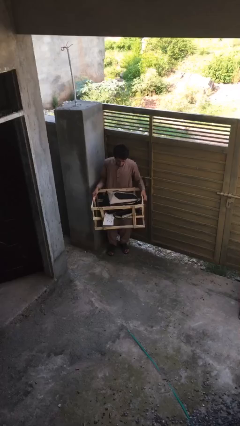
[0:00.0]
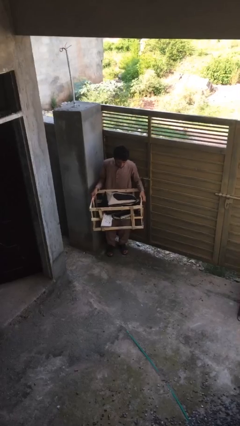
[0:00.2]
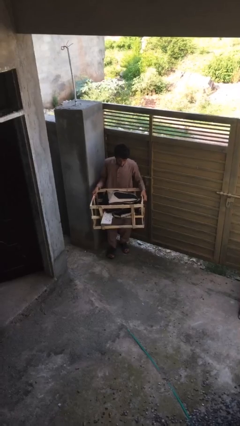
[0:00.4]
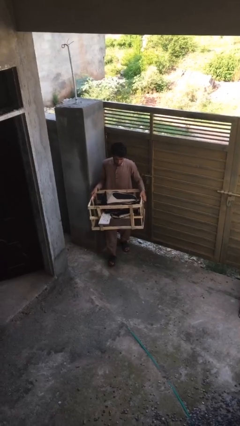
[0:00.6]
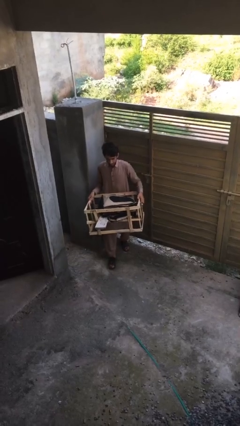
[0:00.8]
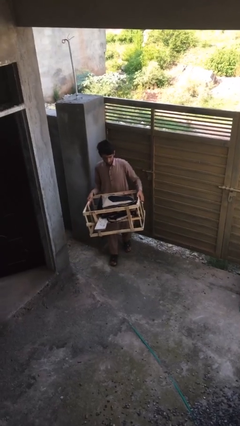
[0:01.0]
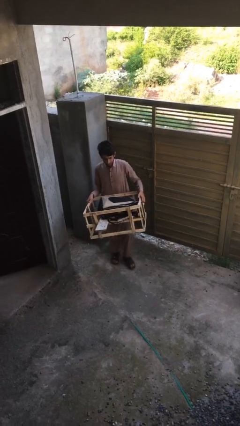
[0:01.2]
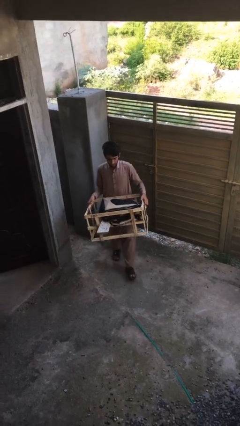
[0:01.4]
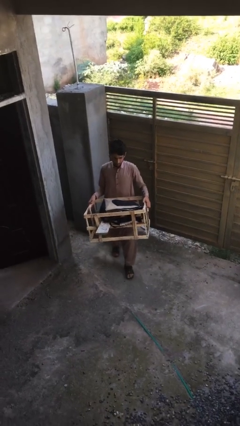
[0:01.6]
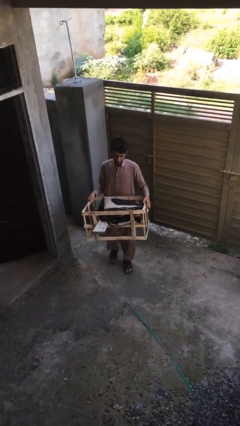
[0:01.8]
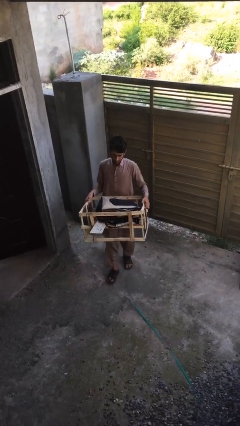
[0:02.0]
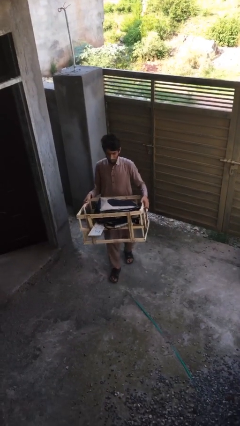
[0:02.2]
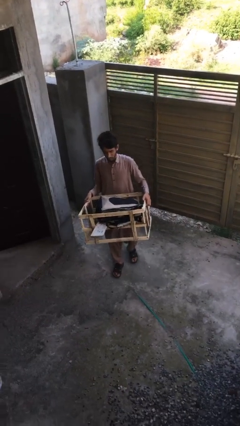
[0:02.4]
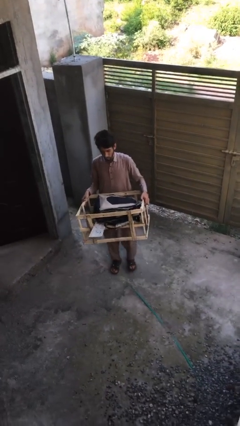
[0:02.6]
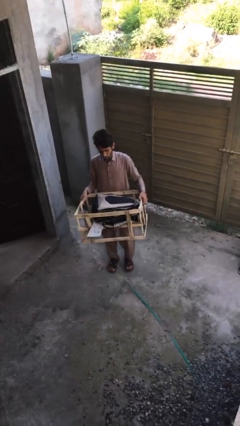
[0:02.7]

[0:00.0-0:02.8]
person carries heavy object

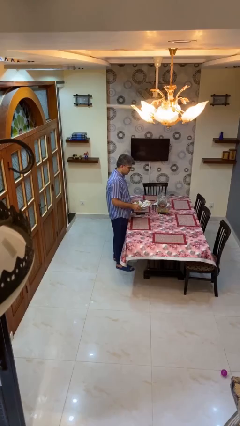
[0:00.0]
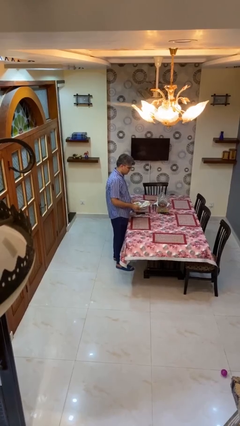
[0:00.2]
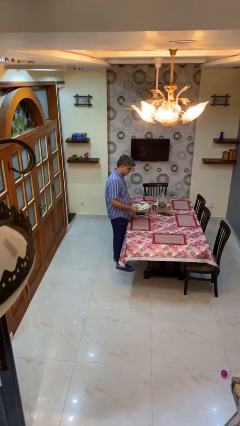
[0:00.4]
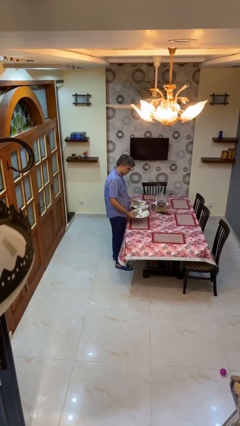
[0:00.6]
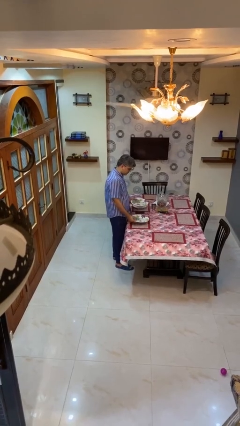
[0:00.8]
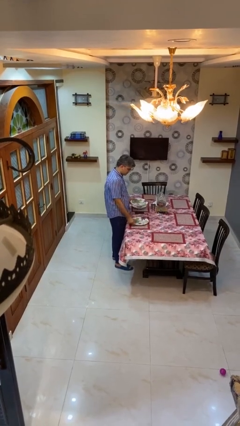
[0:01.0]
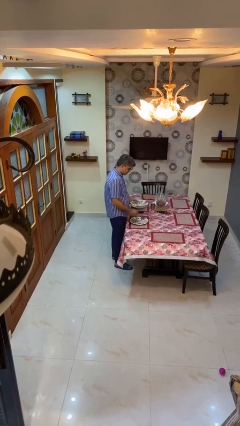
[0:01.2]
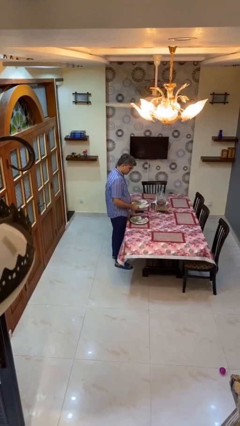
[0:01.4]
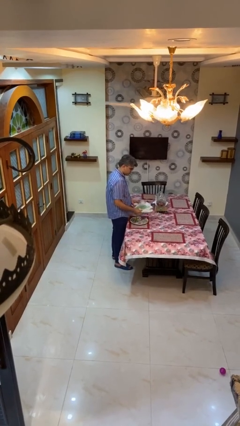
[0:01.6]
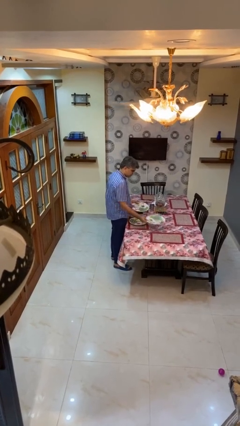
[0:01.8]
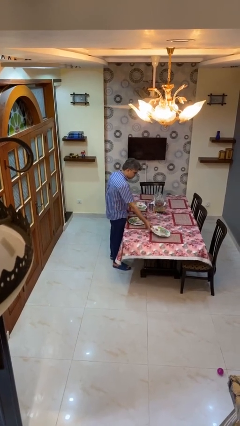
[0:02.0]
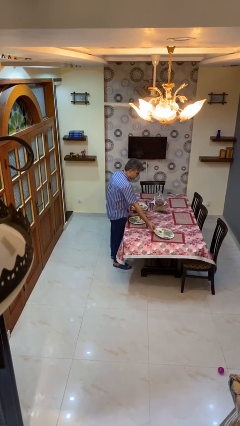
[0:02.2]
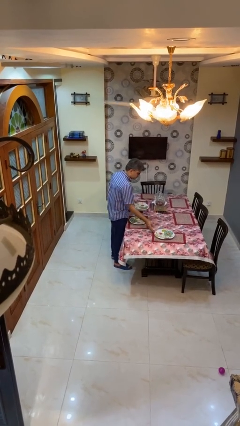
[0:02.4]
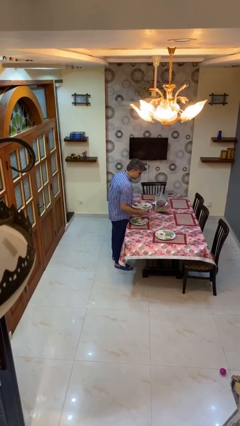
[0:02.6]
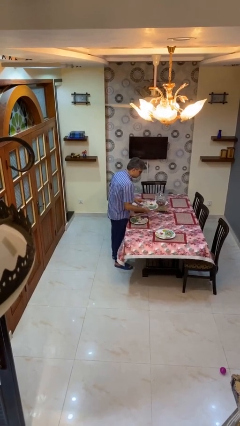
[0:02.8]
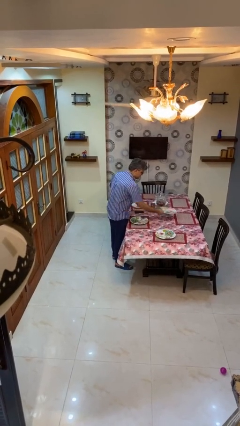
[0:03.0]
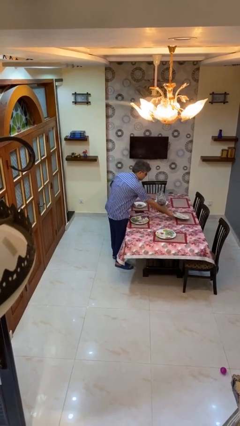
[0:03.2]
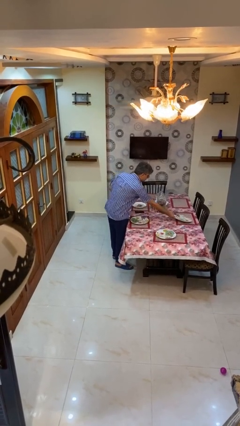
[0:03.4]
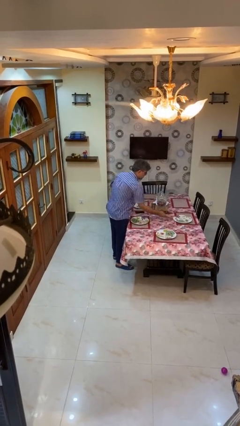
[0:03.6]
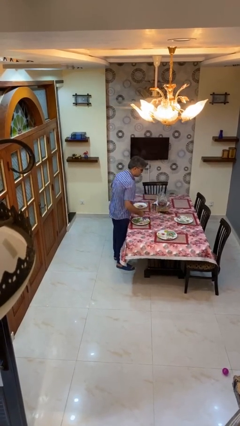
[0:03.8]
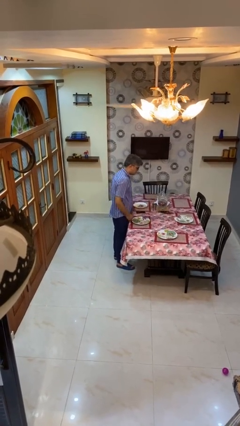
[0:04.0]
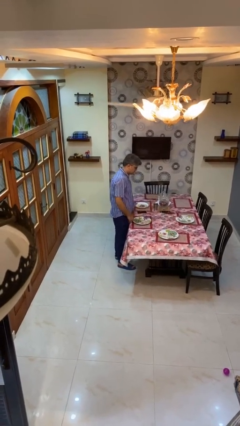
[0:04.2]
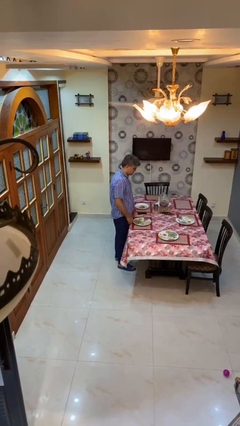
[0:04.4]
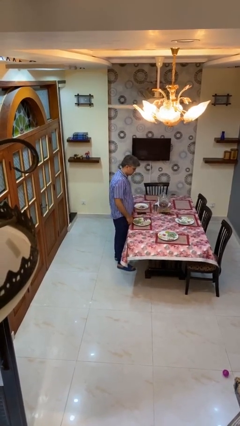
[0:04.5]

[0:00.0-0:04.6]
person sets table

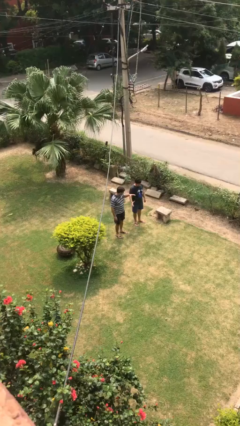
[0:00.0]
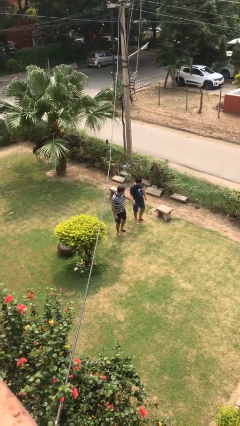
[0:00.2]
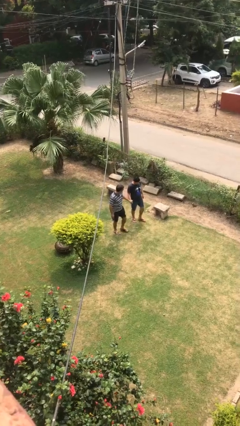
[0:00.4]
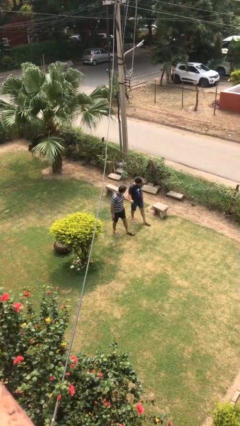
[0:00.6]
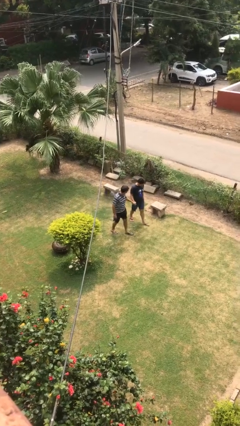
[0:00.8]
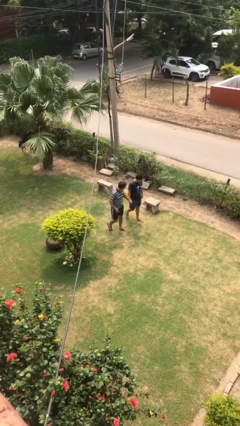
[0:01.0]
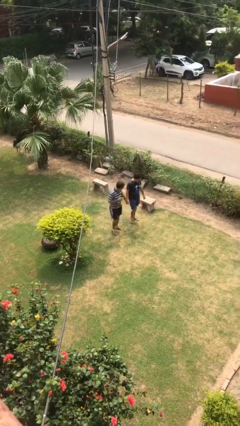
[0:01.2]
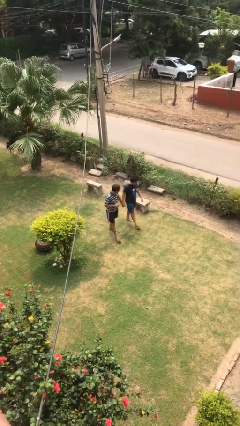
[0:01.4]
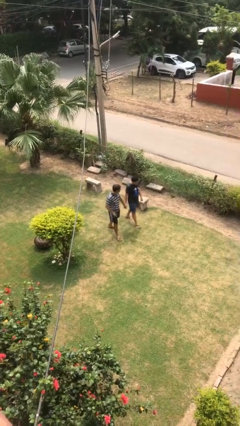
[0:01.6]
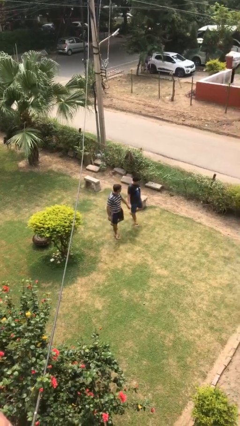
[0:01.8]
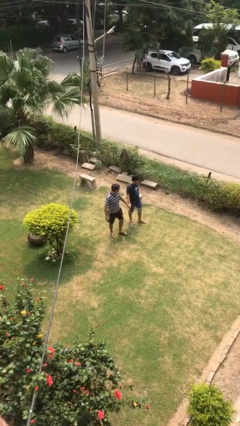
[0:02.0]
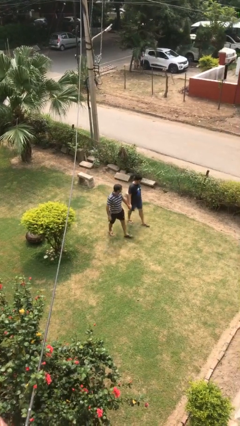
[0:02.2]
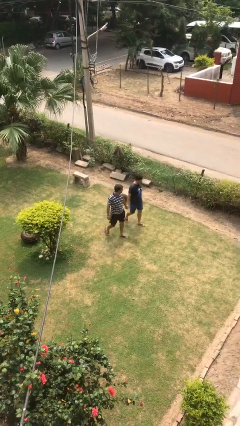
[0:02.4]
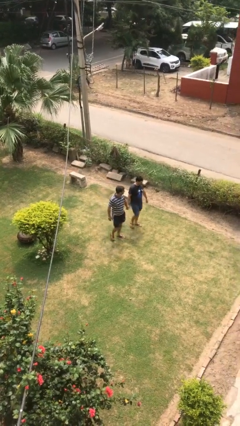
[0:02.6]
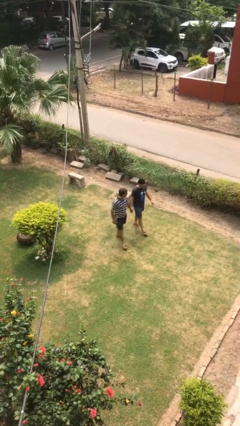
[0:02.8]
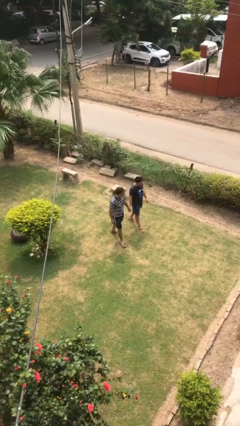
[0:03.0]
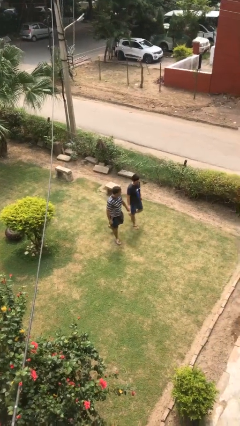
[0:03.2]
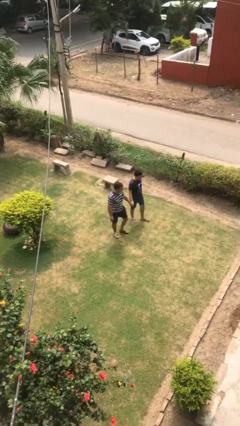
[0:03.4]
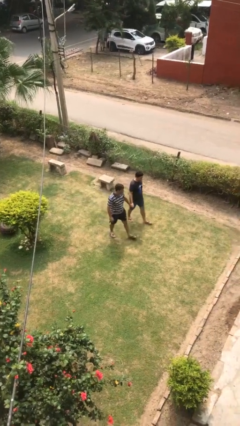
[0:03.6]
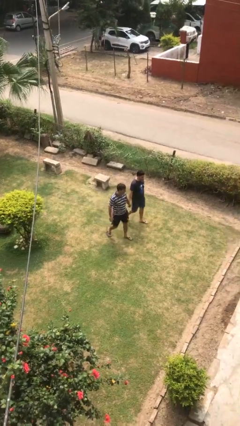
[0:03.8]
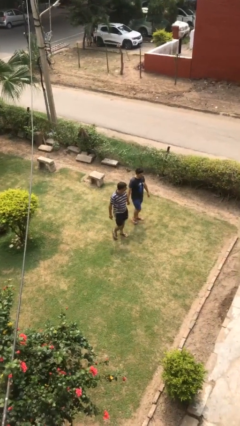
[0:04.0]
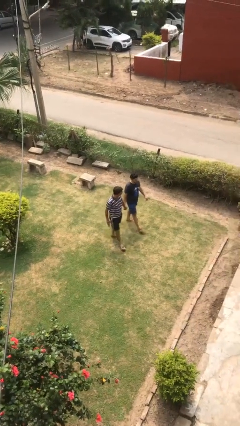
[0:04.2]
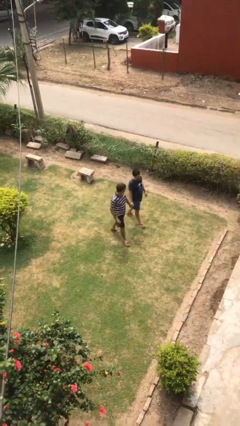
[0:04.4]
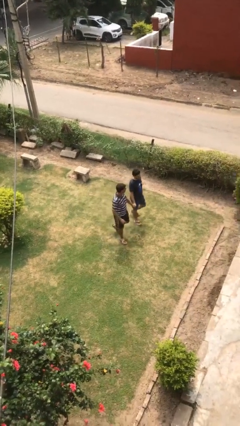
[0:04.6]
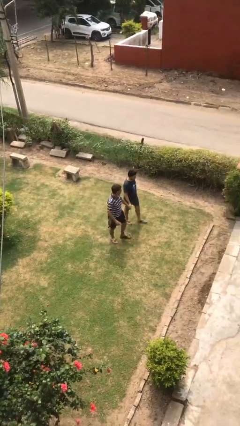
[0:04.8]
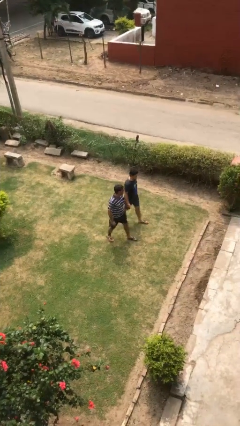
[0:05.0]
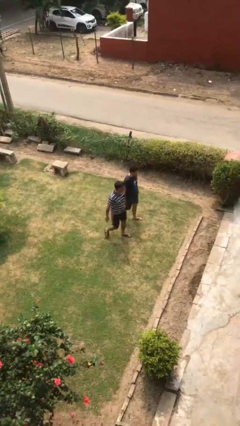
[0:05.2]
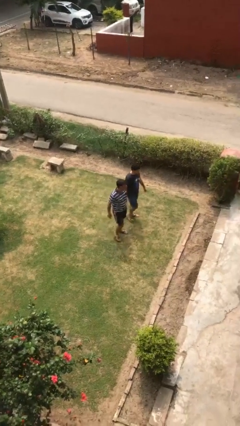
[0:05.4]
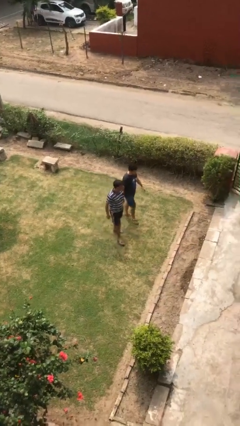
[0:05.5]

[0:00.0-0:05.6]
person holds hand

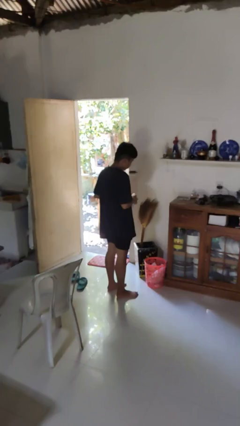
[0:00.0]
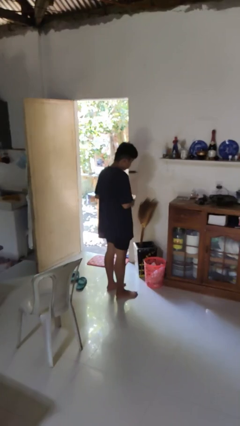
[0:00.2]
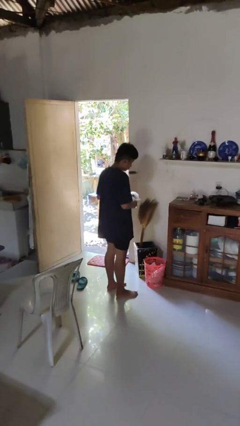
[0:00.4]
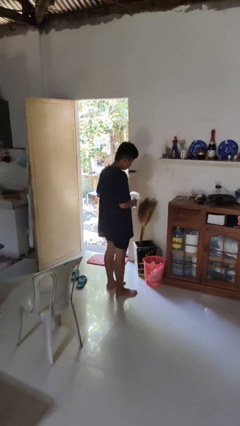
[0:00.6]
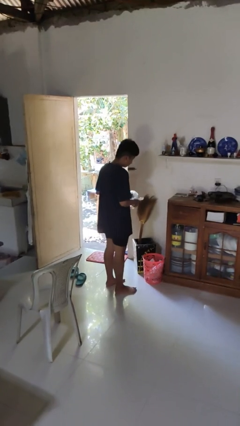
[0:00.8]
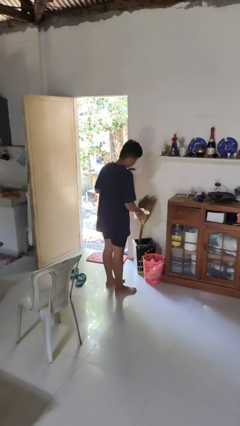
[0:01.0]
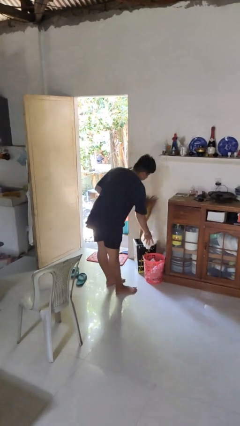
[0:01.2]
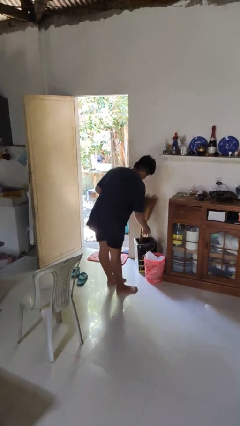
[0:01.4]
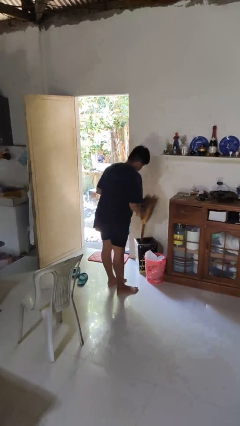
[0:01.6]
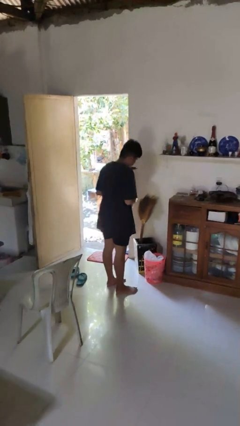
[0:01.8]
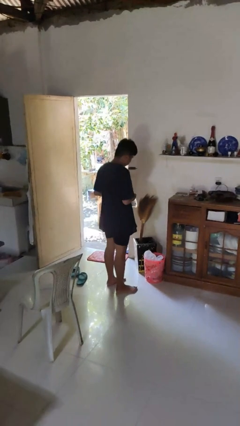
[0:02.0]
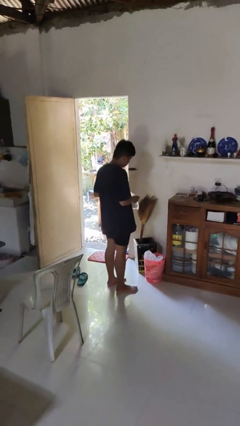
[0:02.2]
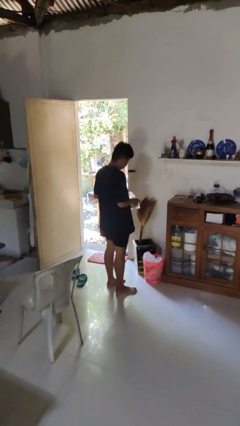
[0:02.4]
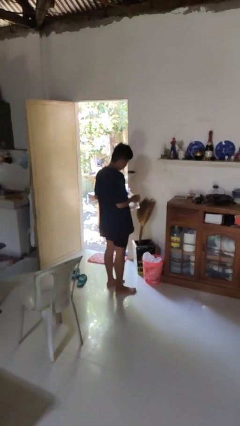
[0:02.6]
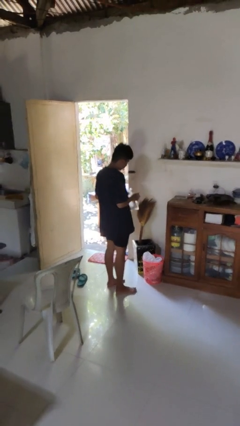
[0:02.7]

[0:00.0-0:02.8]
person discards trash

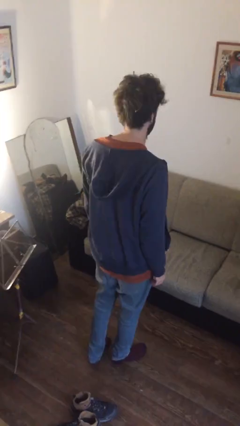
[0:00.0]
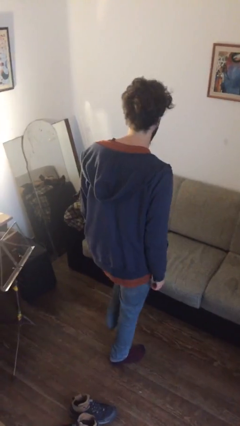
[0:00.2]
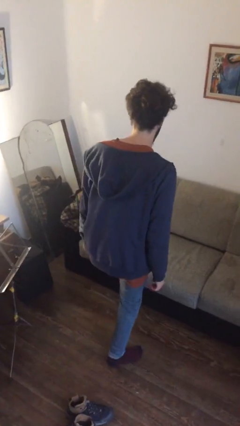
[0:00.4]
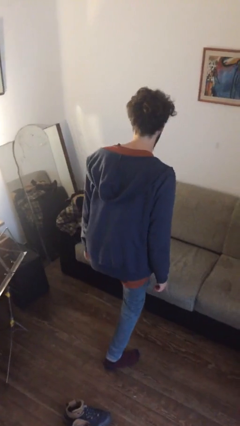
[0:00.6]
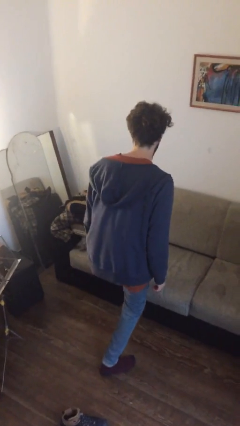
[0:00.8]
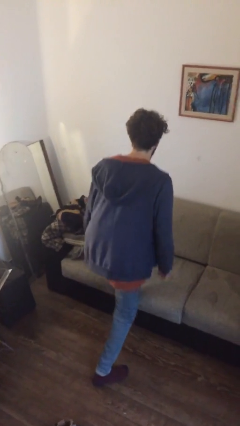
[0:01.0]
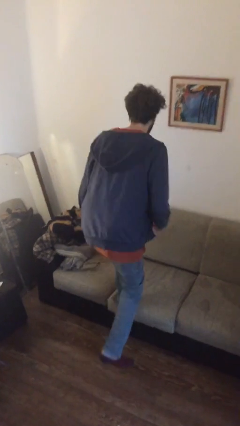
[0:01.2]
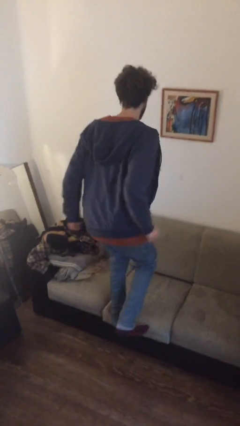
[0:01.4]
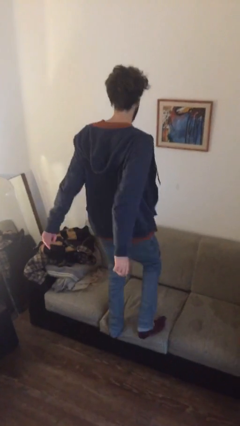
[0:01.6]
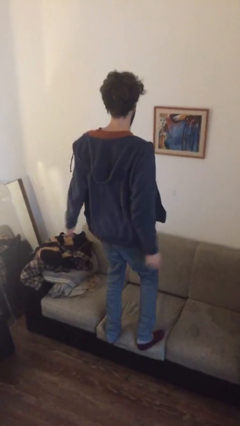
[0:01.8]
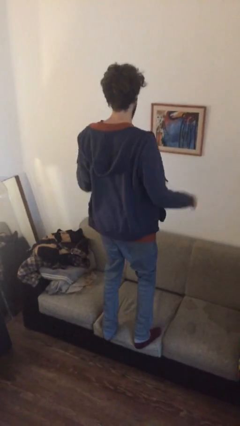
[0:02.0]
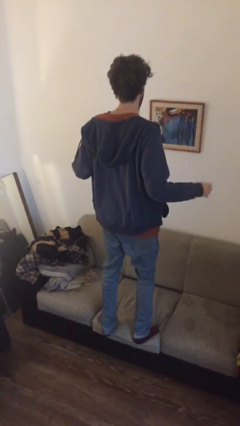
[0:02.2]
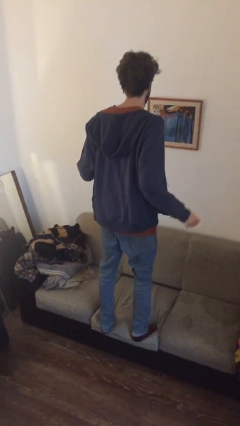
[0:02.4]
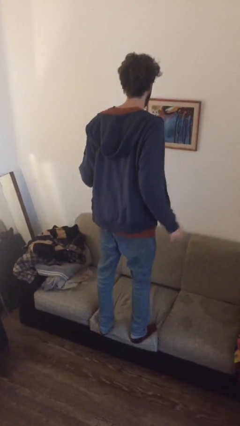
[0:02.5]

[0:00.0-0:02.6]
person climbs on couch
